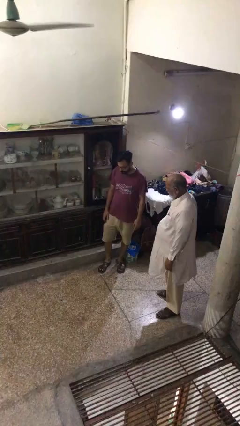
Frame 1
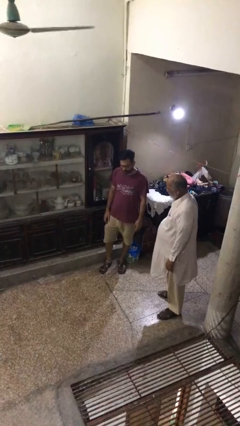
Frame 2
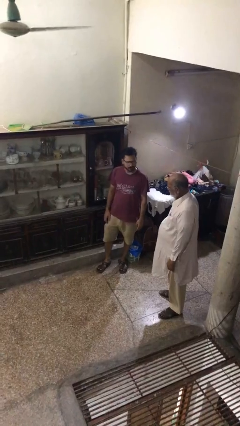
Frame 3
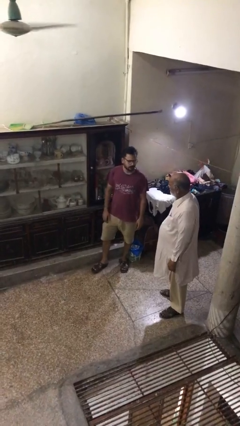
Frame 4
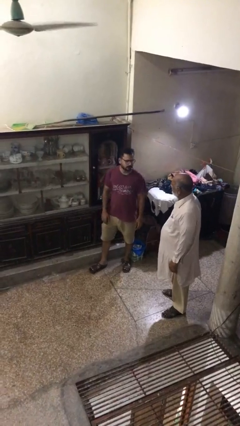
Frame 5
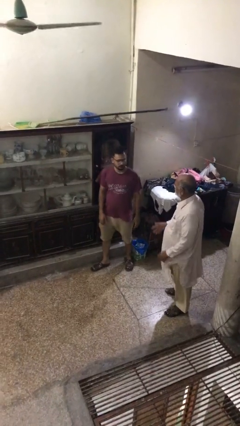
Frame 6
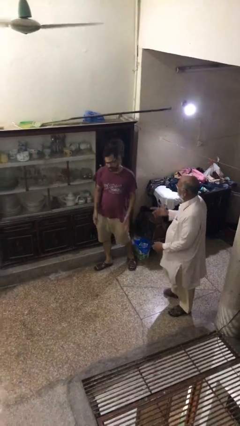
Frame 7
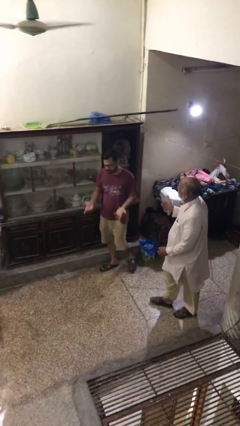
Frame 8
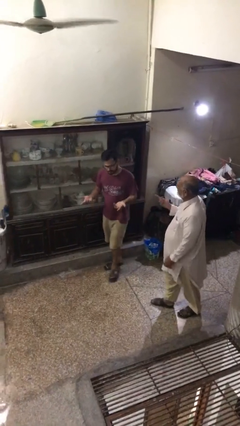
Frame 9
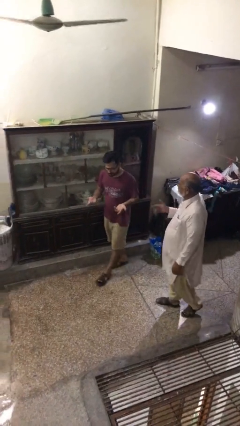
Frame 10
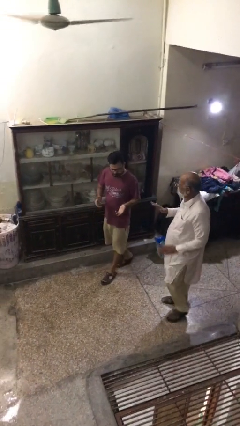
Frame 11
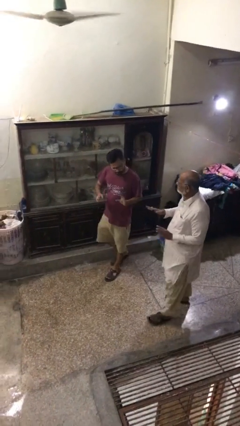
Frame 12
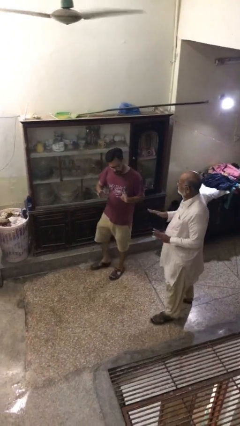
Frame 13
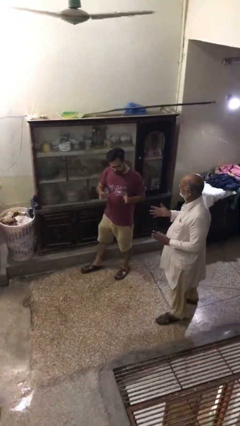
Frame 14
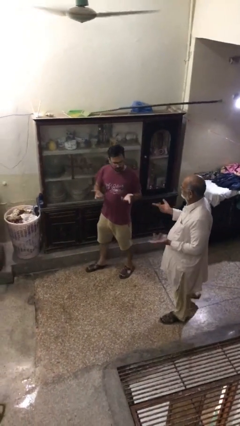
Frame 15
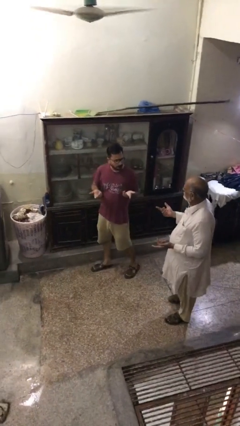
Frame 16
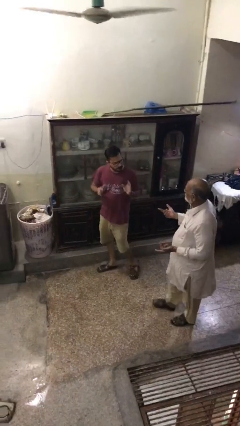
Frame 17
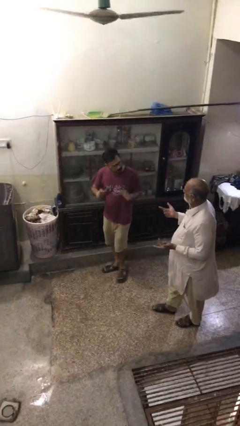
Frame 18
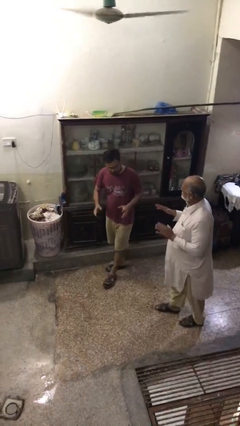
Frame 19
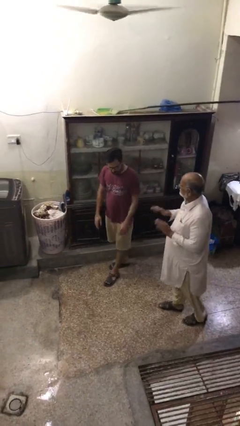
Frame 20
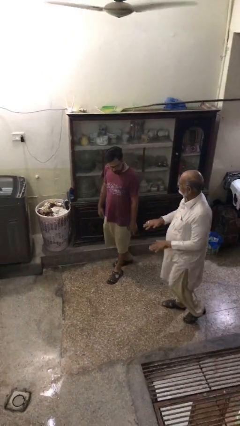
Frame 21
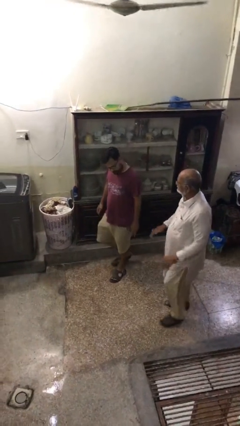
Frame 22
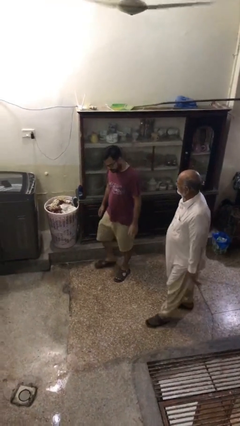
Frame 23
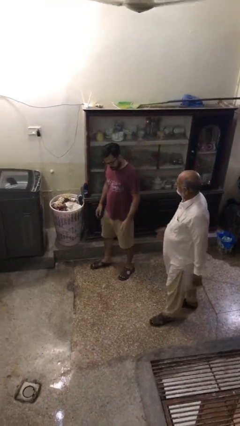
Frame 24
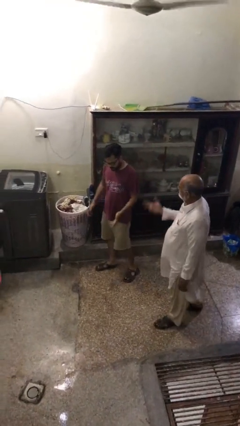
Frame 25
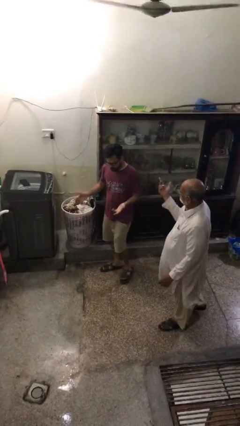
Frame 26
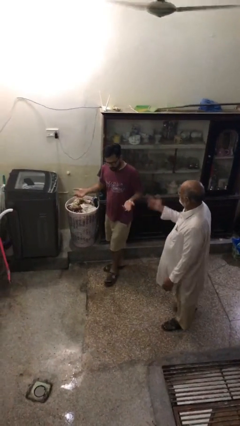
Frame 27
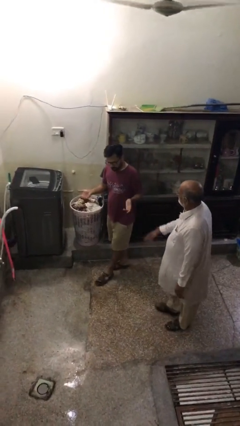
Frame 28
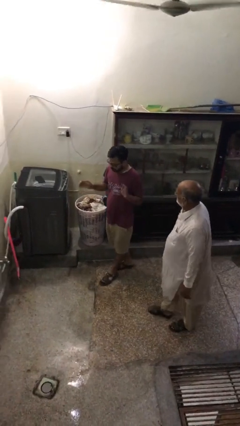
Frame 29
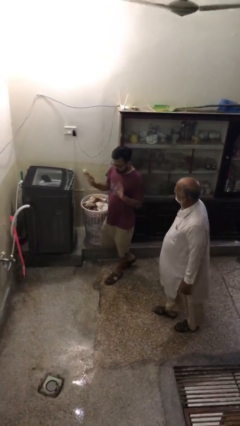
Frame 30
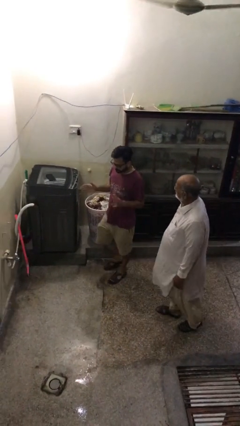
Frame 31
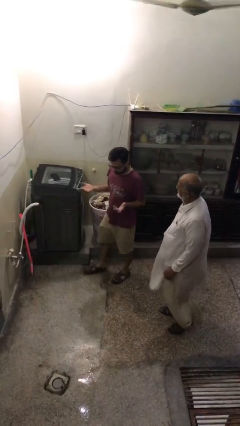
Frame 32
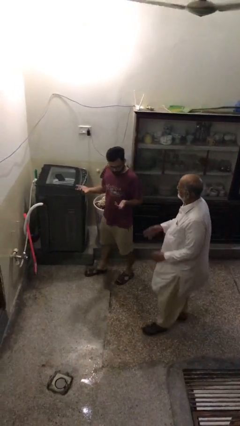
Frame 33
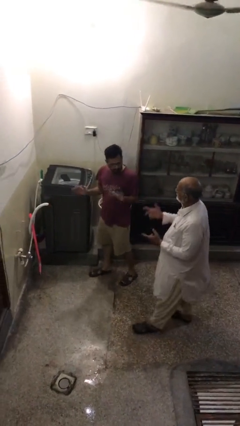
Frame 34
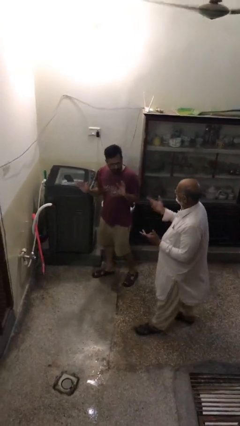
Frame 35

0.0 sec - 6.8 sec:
person talks to person

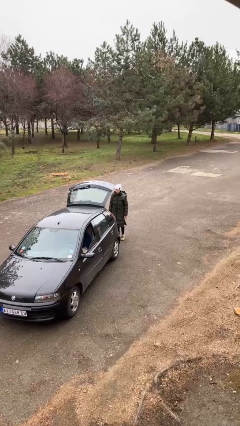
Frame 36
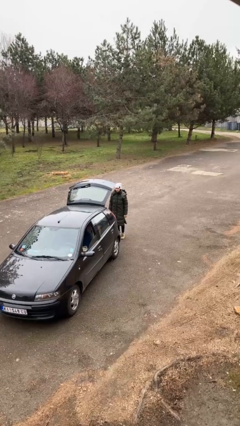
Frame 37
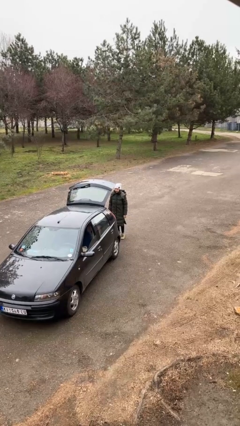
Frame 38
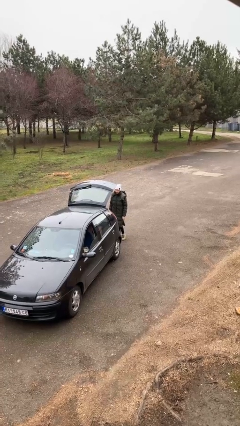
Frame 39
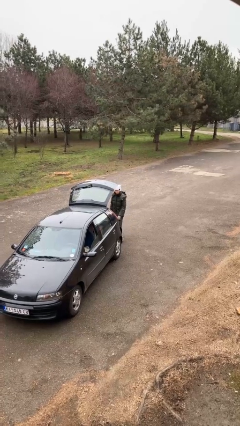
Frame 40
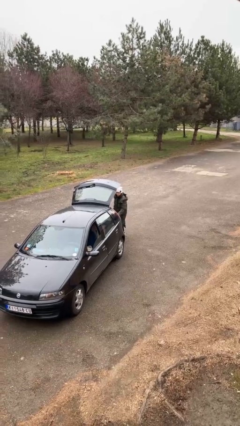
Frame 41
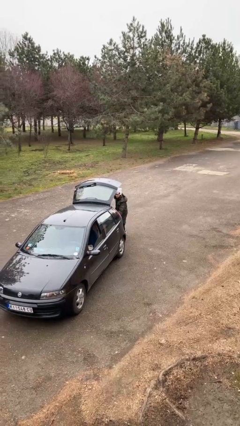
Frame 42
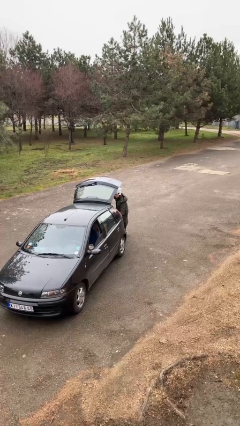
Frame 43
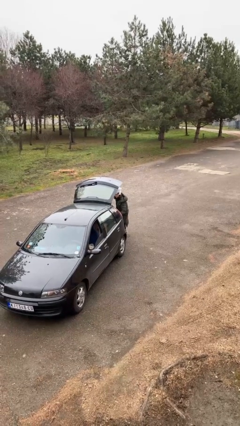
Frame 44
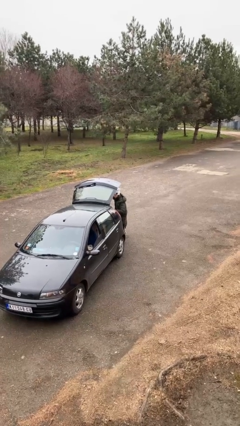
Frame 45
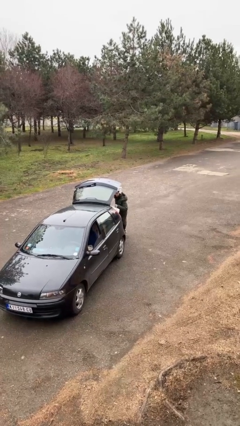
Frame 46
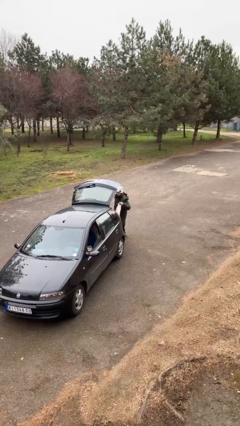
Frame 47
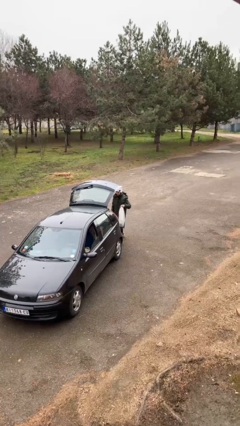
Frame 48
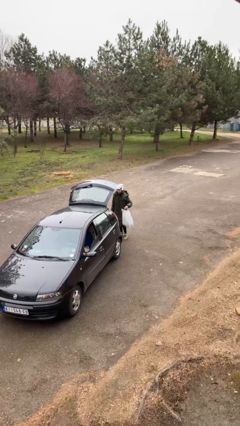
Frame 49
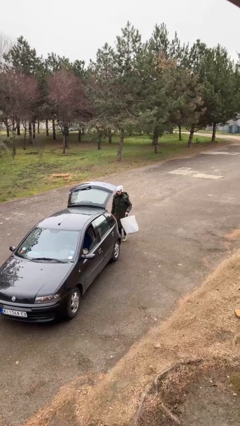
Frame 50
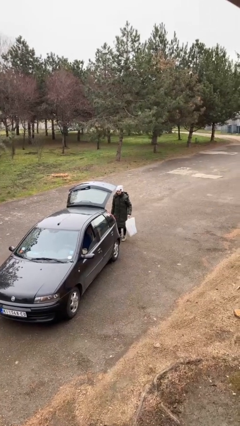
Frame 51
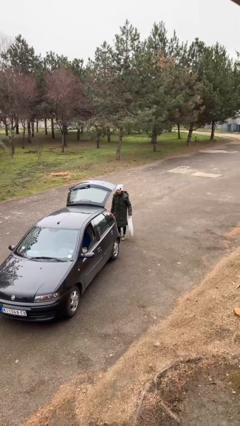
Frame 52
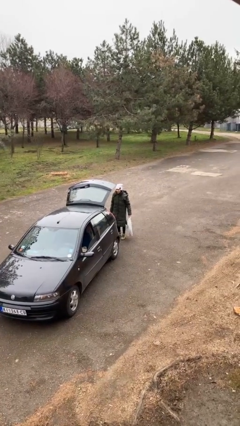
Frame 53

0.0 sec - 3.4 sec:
person unloads car

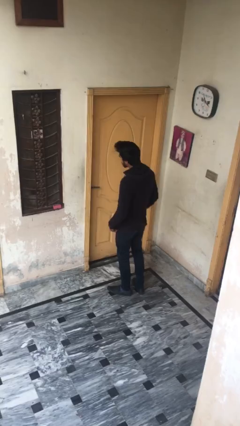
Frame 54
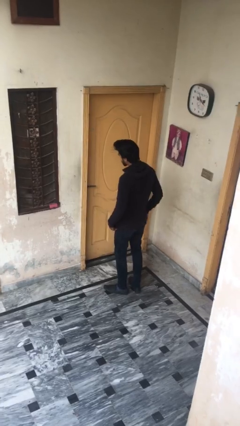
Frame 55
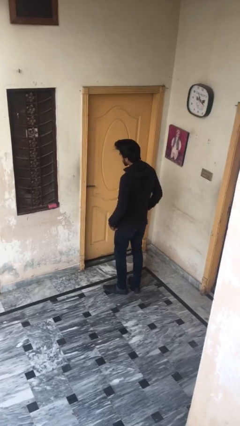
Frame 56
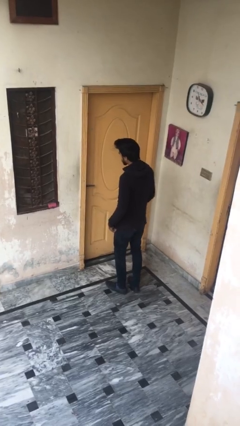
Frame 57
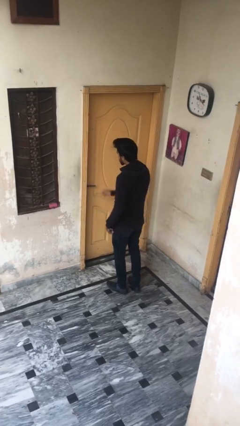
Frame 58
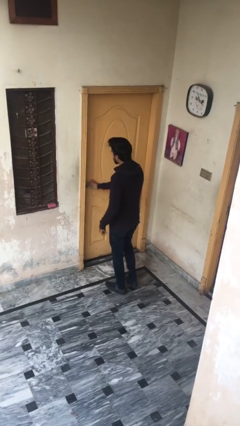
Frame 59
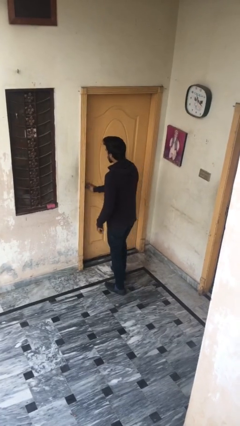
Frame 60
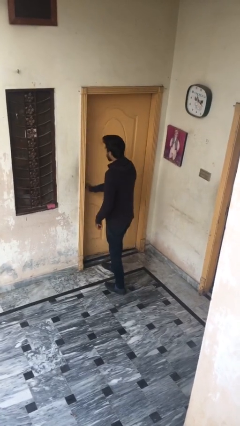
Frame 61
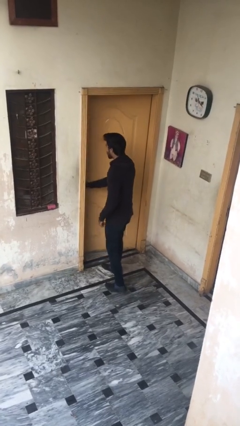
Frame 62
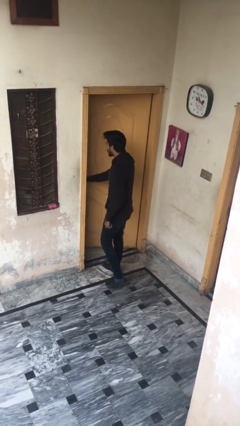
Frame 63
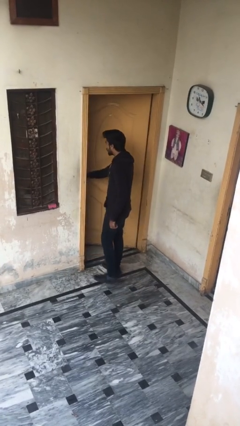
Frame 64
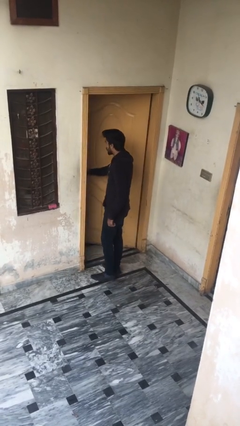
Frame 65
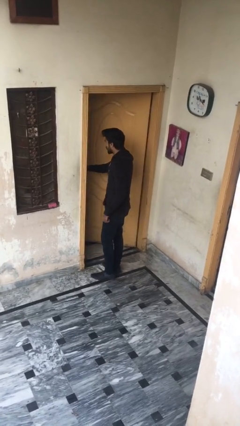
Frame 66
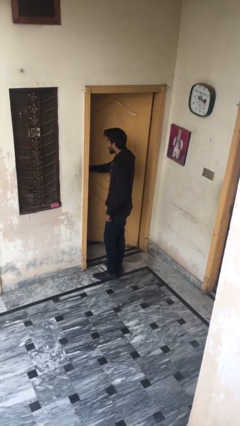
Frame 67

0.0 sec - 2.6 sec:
person opens facility door

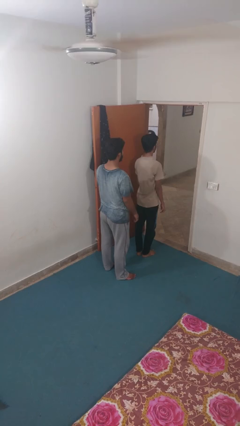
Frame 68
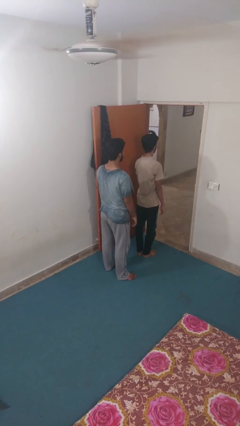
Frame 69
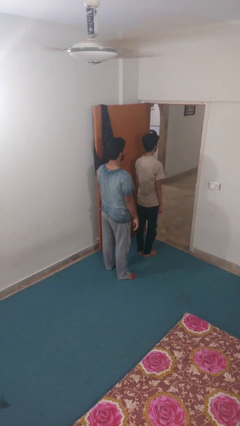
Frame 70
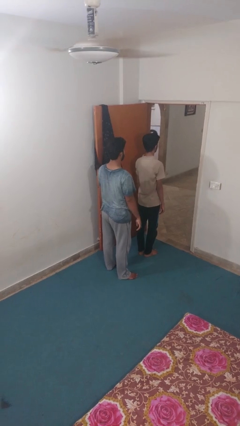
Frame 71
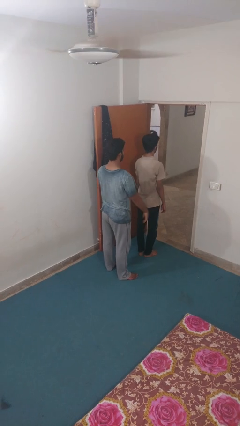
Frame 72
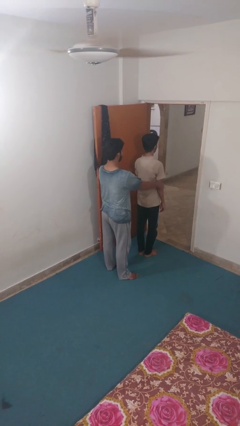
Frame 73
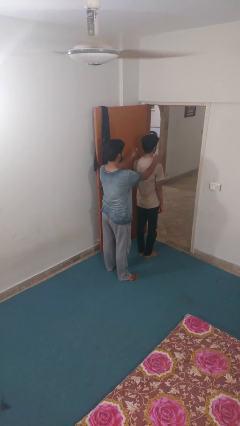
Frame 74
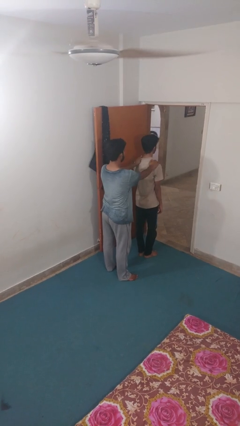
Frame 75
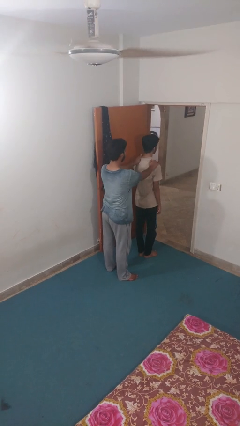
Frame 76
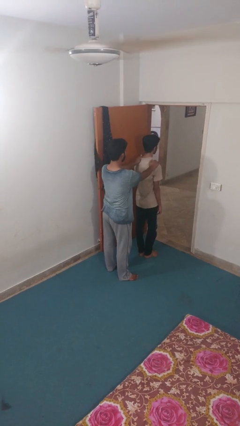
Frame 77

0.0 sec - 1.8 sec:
person grabs person by shoulder

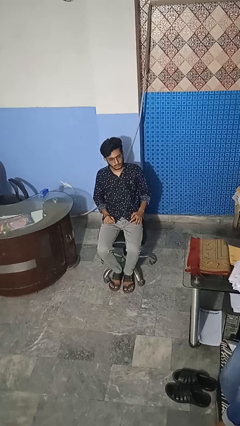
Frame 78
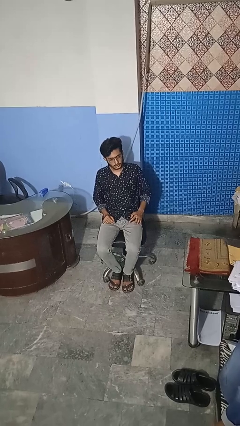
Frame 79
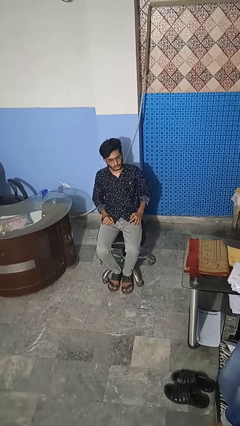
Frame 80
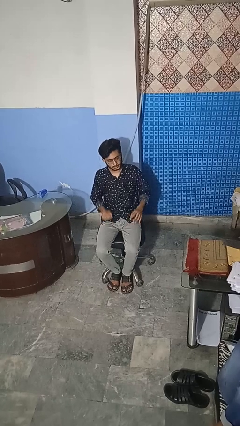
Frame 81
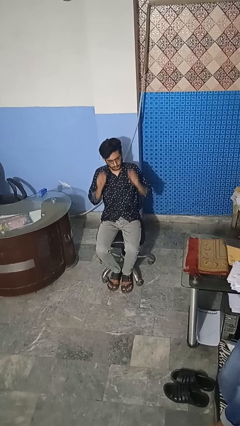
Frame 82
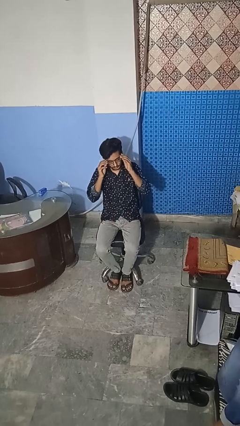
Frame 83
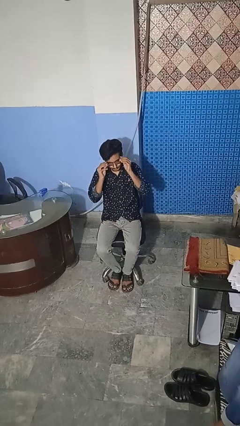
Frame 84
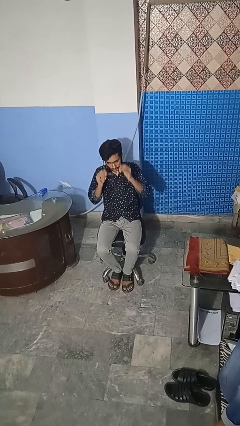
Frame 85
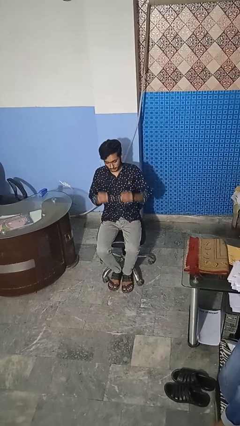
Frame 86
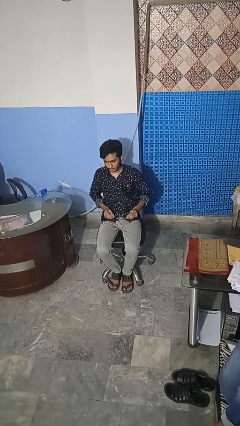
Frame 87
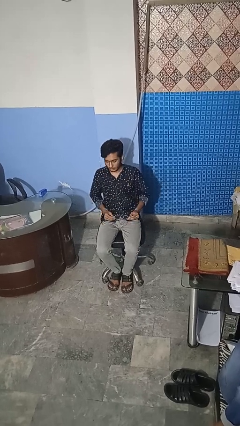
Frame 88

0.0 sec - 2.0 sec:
person takes off glasses

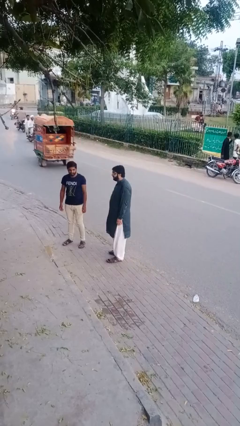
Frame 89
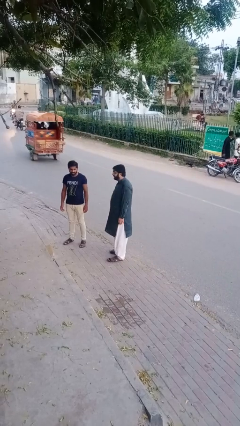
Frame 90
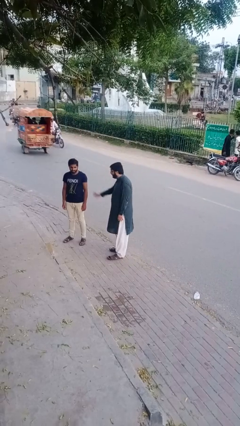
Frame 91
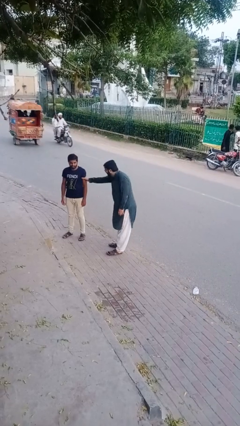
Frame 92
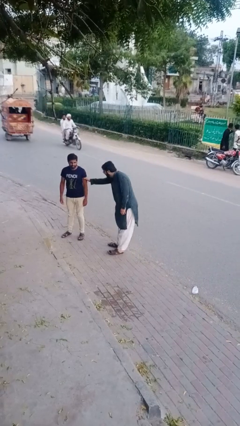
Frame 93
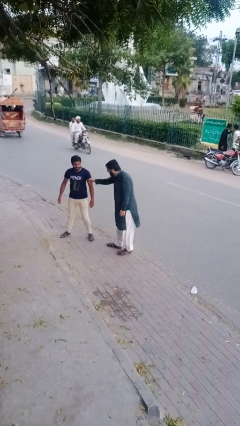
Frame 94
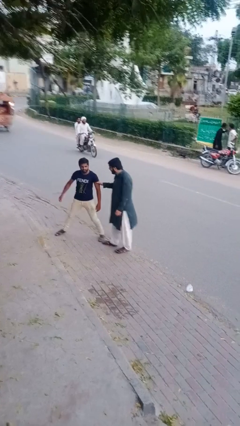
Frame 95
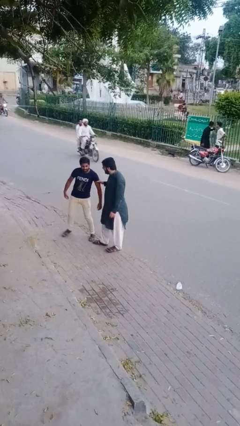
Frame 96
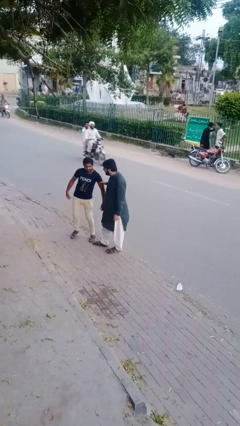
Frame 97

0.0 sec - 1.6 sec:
person grabs person by bicep
